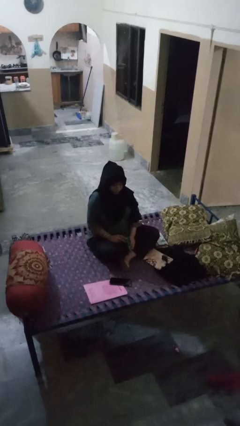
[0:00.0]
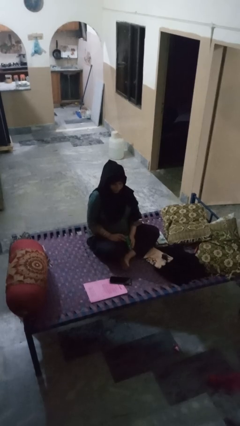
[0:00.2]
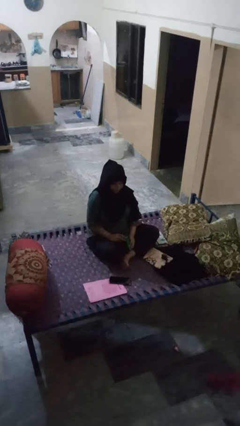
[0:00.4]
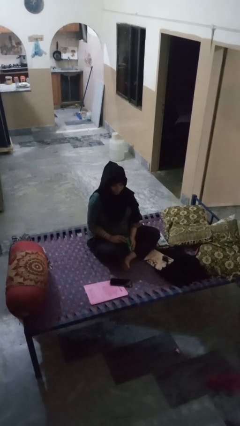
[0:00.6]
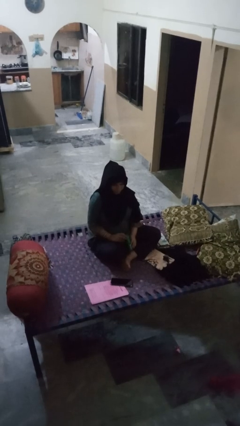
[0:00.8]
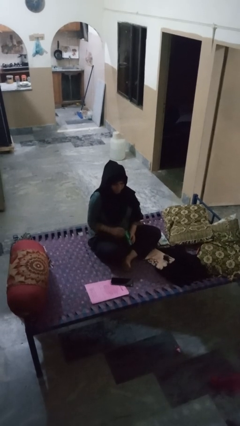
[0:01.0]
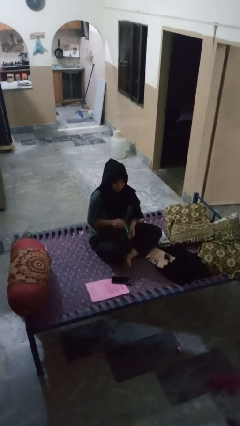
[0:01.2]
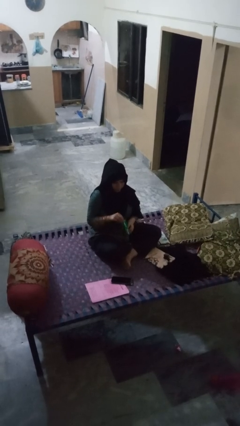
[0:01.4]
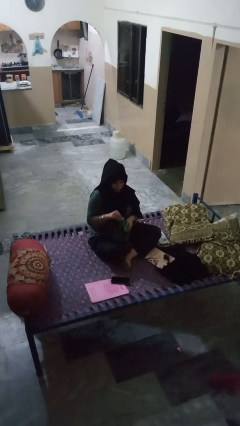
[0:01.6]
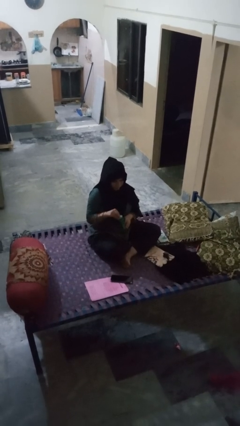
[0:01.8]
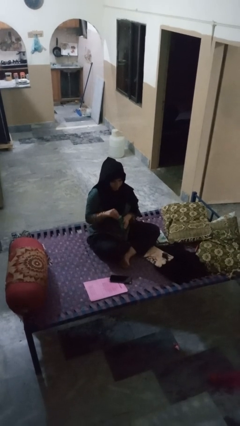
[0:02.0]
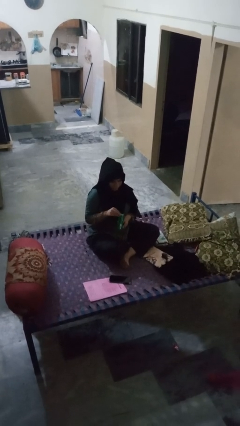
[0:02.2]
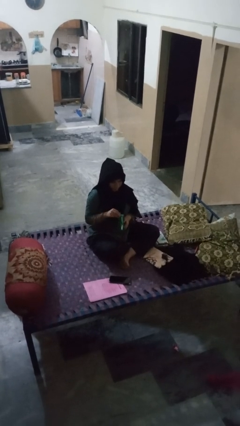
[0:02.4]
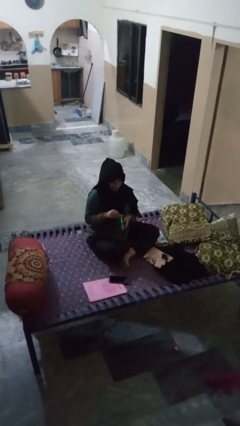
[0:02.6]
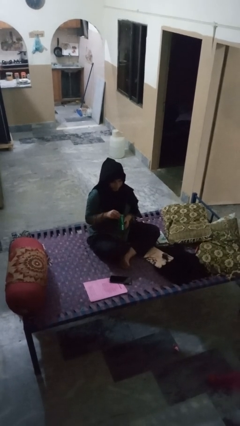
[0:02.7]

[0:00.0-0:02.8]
person opens can with can opener

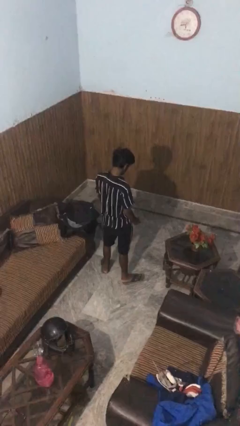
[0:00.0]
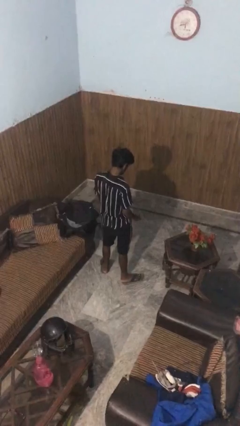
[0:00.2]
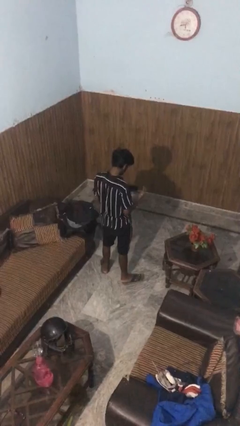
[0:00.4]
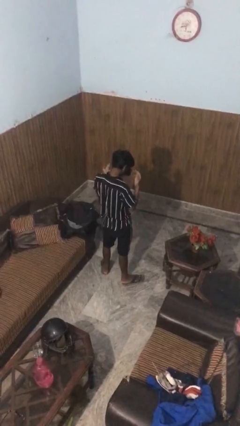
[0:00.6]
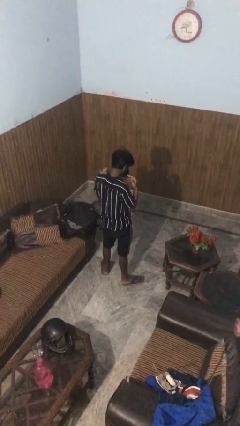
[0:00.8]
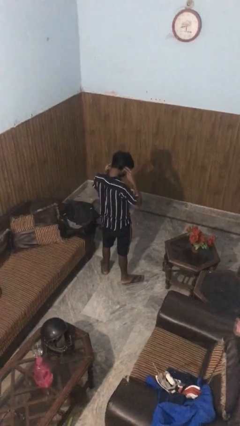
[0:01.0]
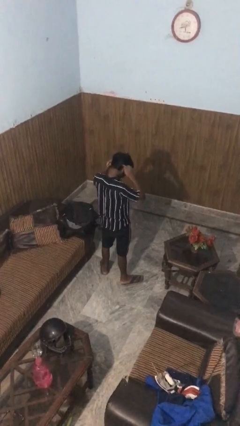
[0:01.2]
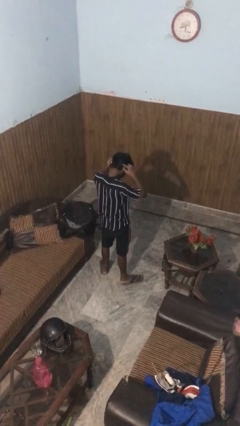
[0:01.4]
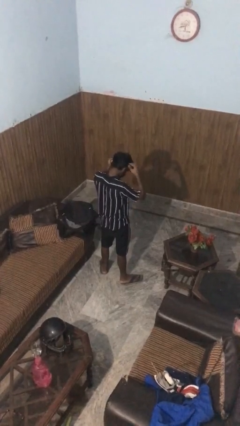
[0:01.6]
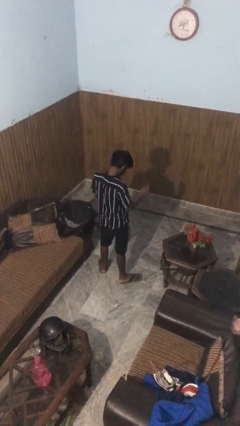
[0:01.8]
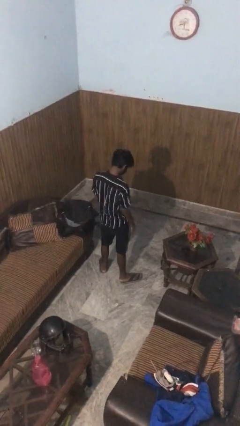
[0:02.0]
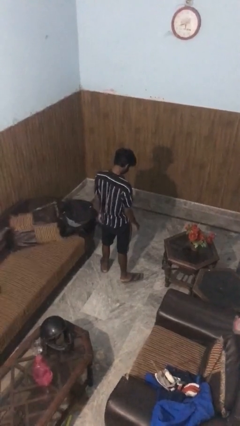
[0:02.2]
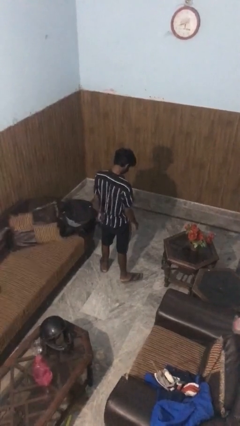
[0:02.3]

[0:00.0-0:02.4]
person puts on facemask

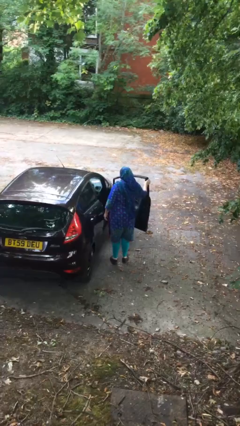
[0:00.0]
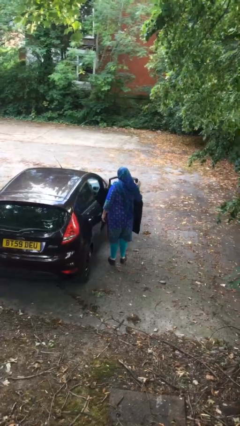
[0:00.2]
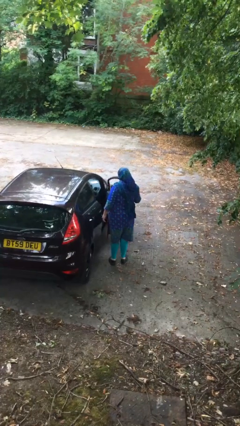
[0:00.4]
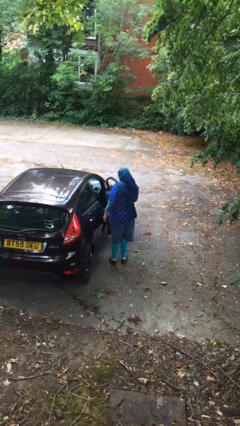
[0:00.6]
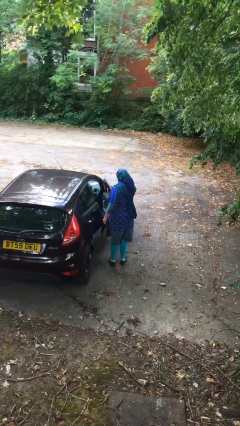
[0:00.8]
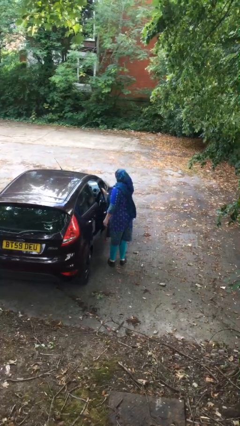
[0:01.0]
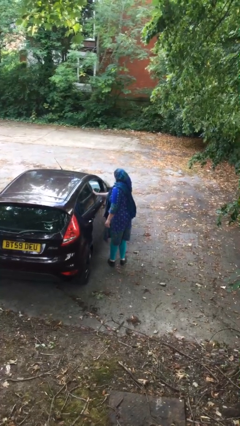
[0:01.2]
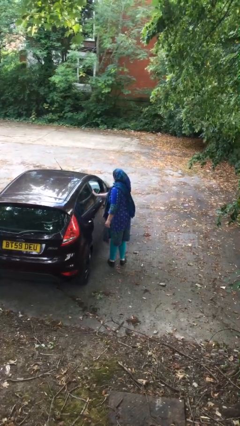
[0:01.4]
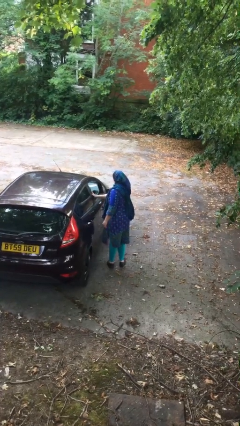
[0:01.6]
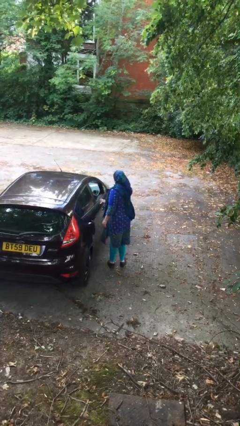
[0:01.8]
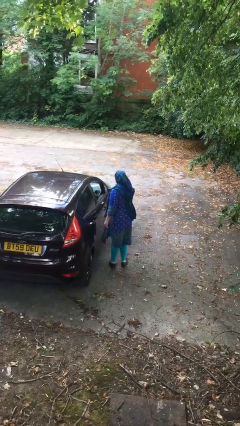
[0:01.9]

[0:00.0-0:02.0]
person closes car door

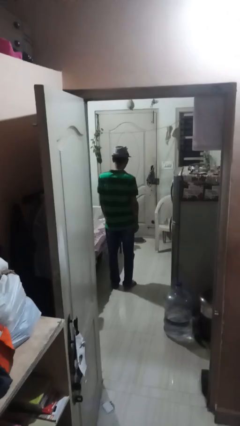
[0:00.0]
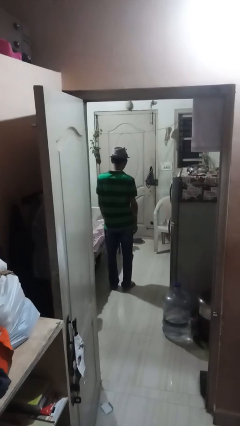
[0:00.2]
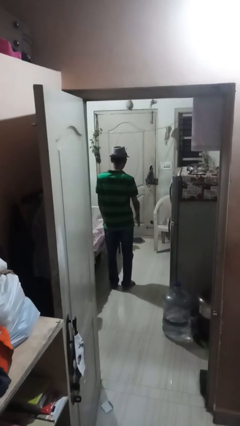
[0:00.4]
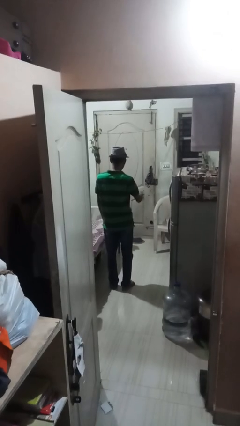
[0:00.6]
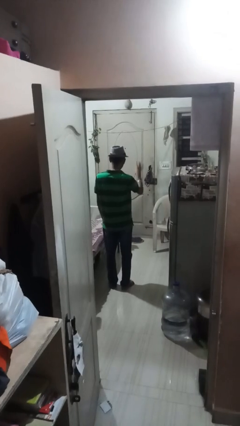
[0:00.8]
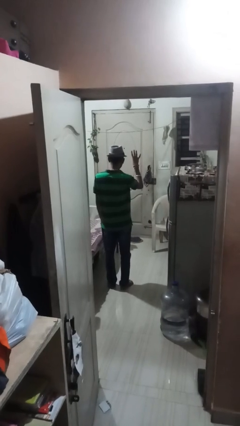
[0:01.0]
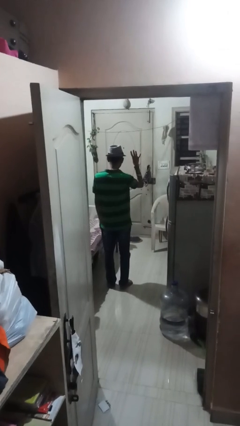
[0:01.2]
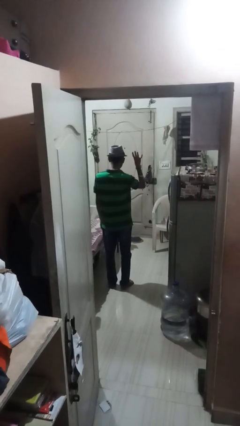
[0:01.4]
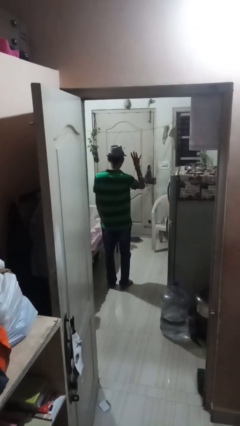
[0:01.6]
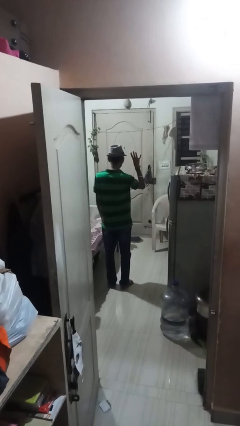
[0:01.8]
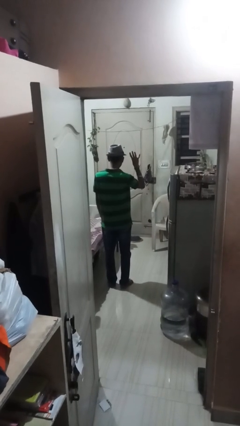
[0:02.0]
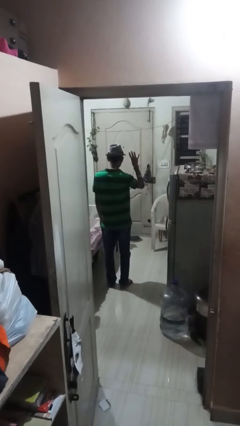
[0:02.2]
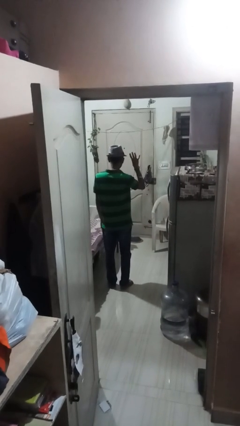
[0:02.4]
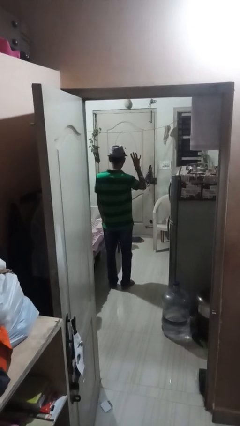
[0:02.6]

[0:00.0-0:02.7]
person gestures number four

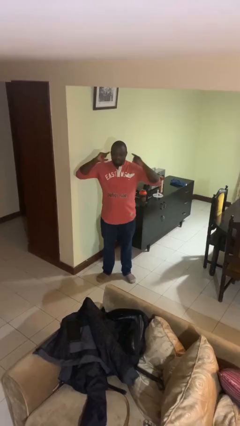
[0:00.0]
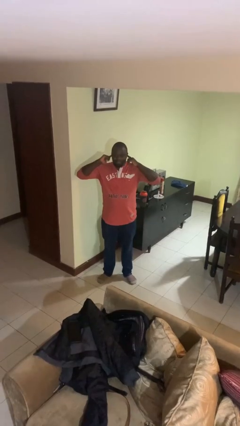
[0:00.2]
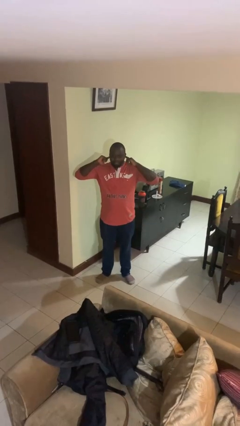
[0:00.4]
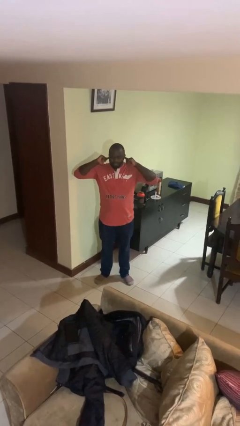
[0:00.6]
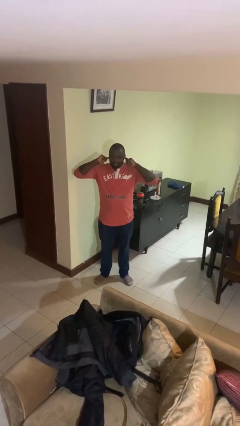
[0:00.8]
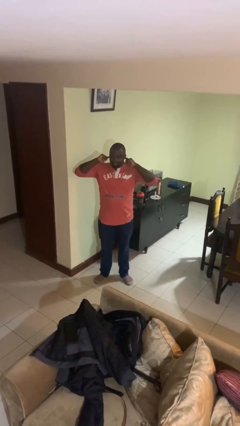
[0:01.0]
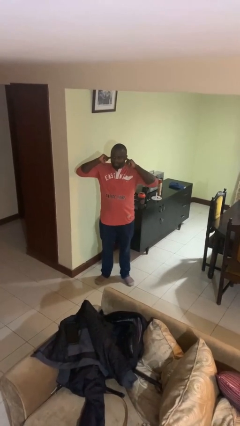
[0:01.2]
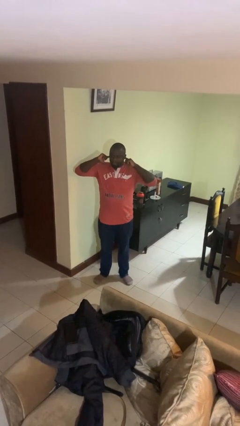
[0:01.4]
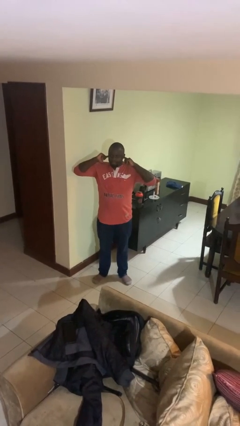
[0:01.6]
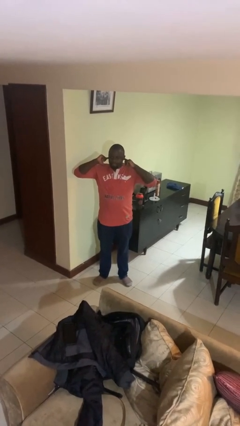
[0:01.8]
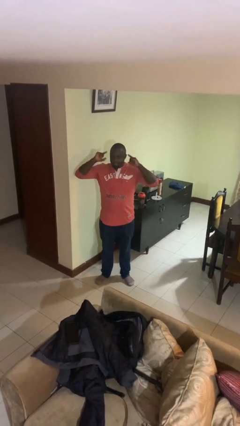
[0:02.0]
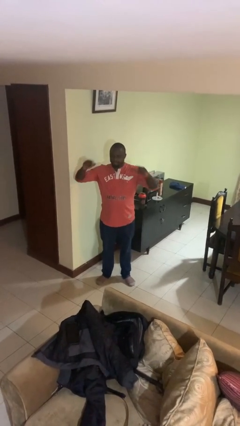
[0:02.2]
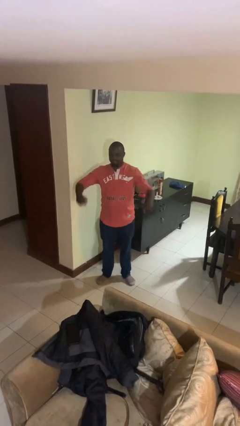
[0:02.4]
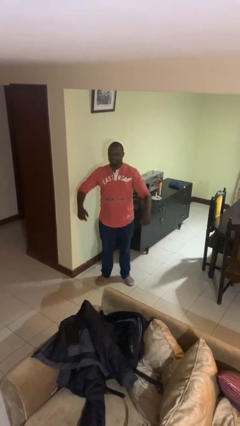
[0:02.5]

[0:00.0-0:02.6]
person puts fingers in ear

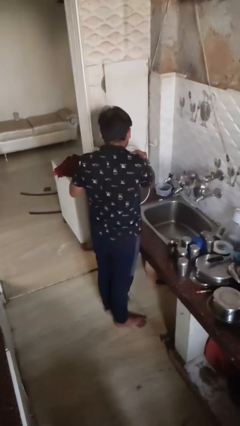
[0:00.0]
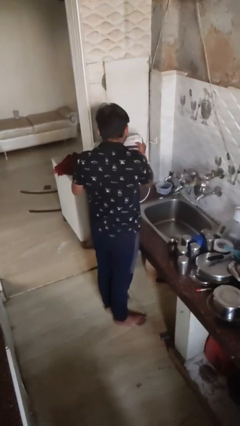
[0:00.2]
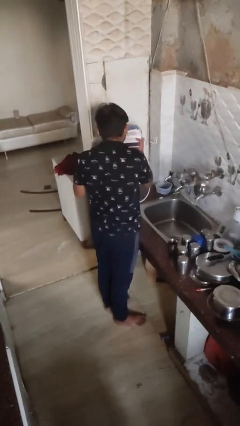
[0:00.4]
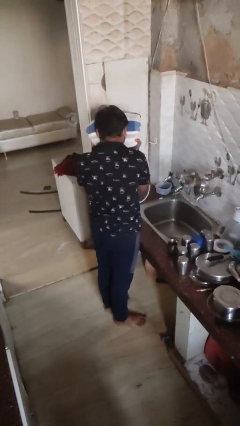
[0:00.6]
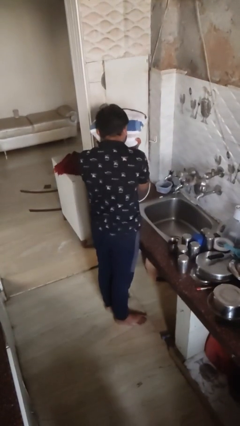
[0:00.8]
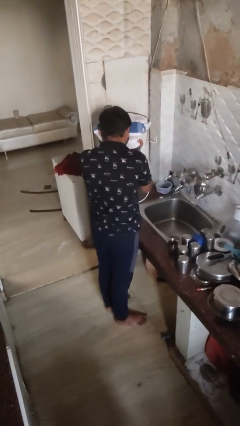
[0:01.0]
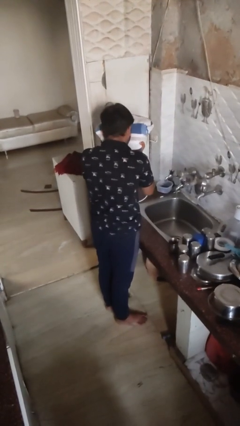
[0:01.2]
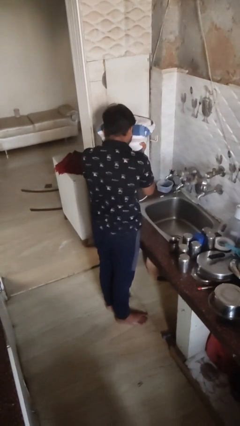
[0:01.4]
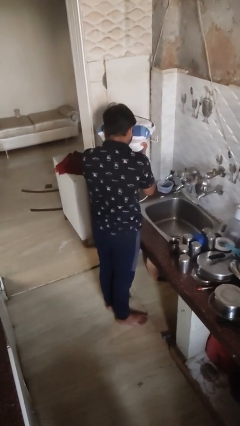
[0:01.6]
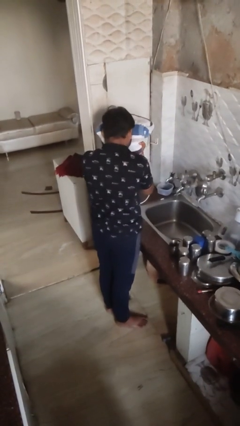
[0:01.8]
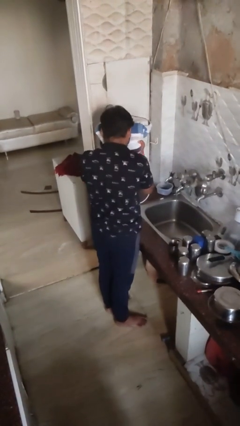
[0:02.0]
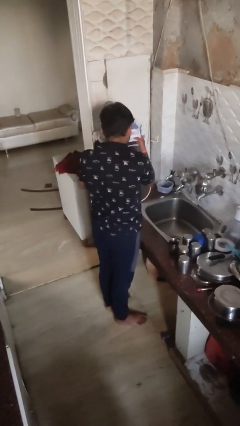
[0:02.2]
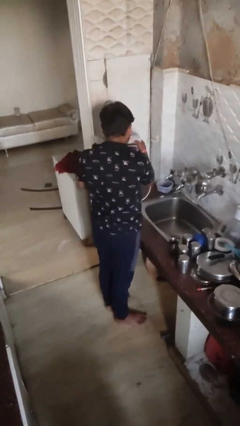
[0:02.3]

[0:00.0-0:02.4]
person dries face with towel

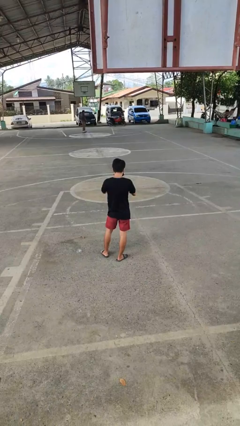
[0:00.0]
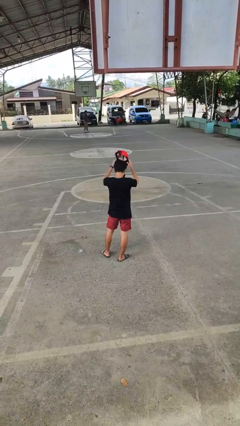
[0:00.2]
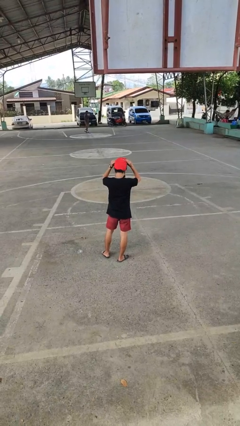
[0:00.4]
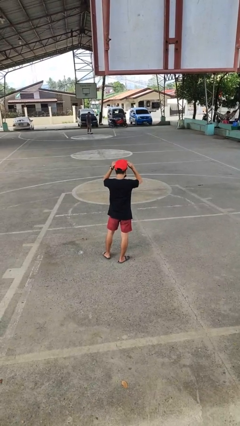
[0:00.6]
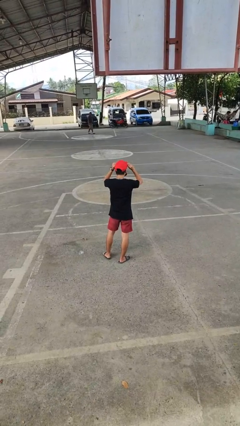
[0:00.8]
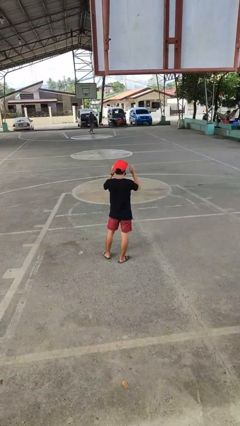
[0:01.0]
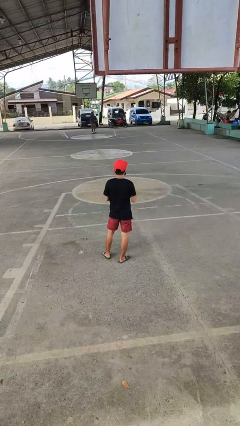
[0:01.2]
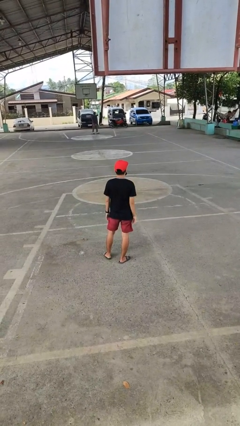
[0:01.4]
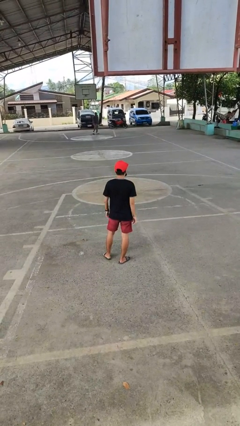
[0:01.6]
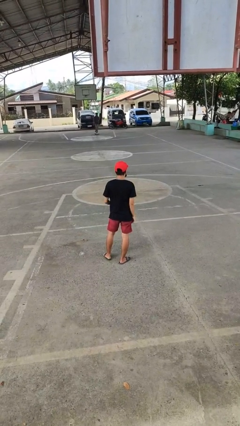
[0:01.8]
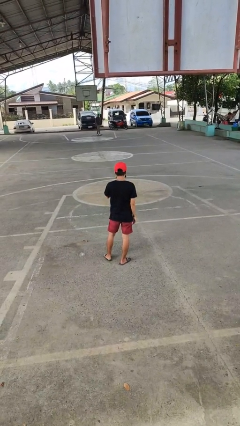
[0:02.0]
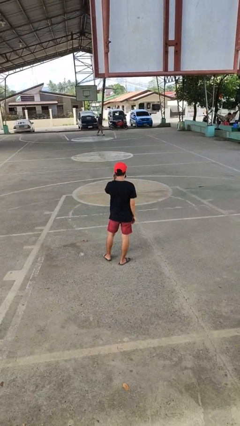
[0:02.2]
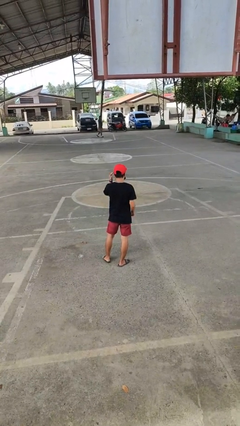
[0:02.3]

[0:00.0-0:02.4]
person puts on hat
